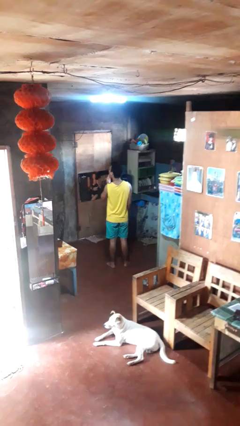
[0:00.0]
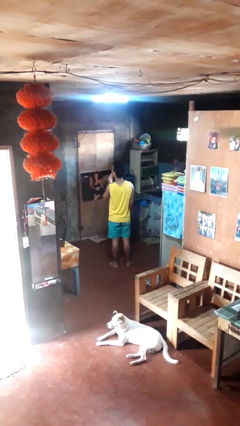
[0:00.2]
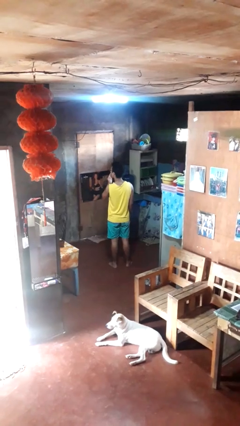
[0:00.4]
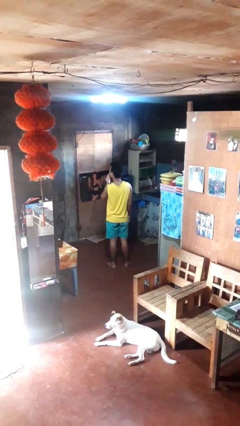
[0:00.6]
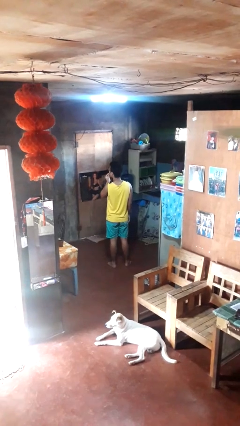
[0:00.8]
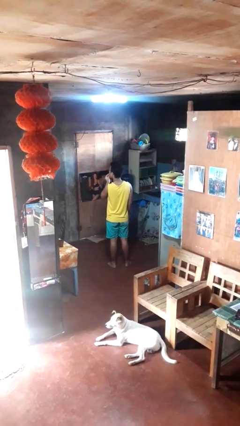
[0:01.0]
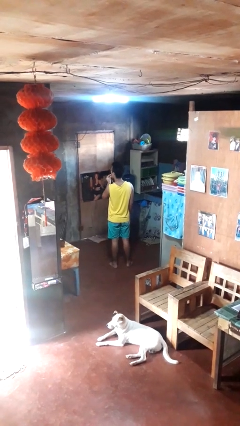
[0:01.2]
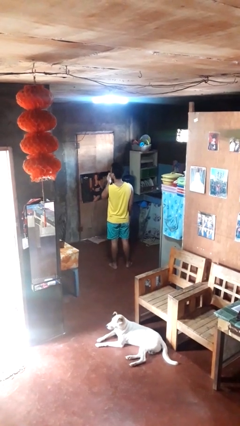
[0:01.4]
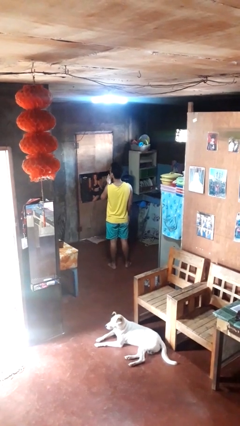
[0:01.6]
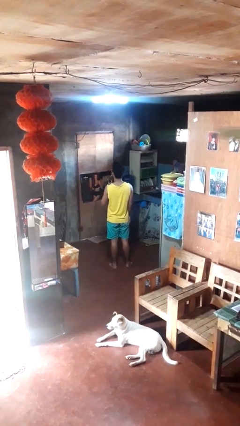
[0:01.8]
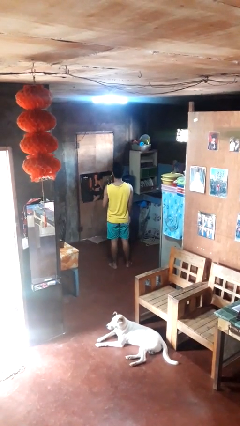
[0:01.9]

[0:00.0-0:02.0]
person licks fingers

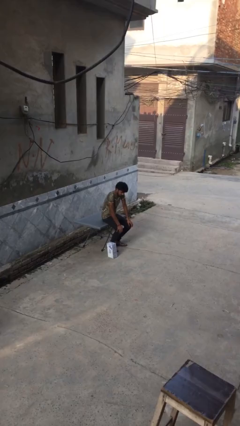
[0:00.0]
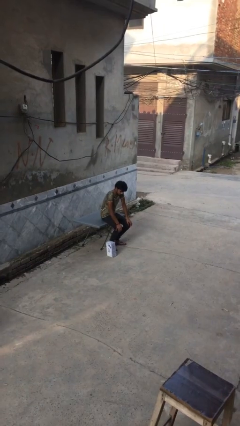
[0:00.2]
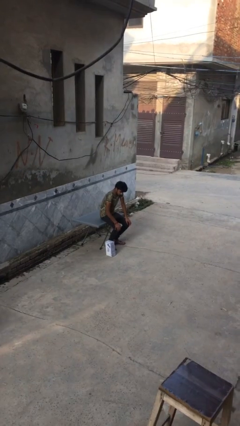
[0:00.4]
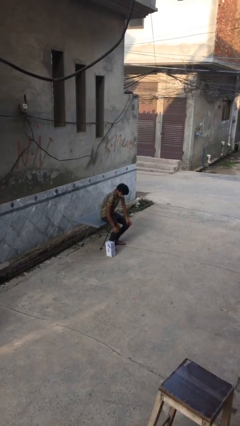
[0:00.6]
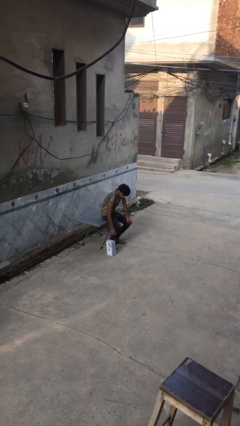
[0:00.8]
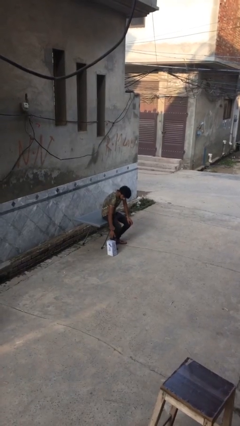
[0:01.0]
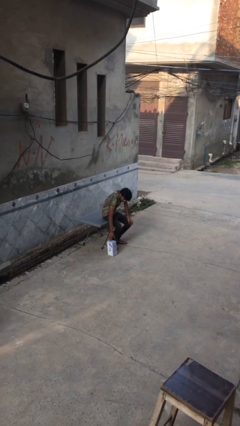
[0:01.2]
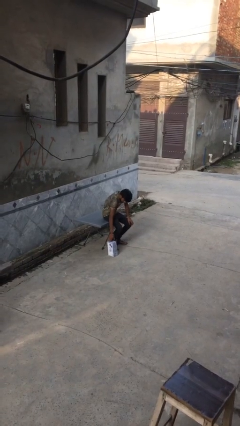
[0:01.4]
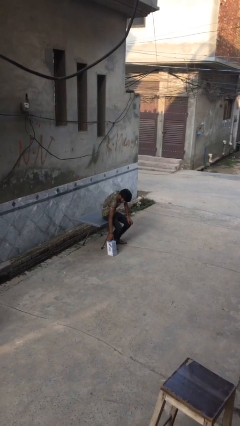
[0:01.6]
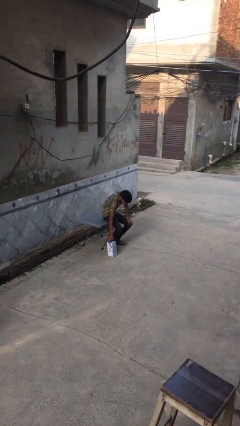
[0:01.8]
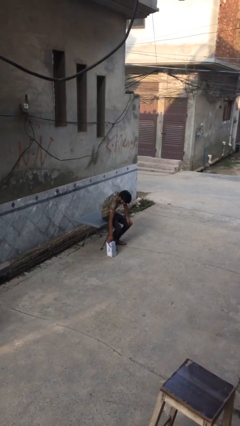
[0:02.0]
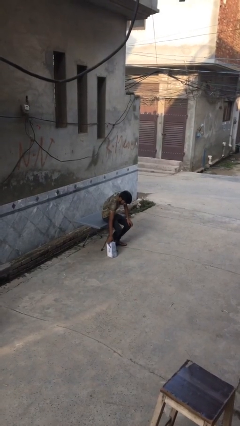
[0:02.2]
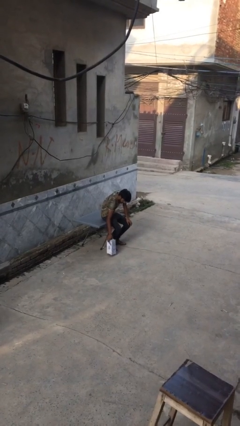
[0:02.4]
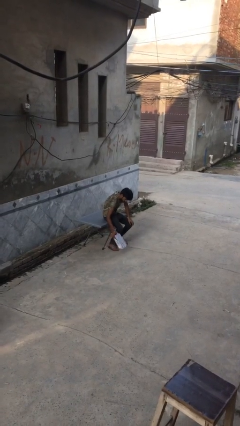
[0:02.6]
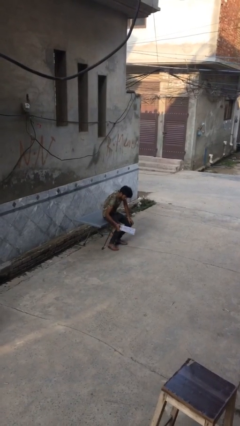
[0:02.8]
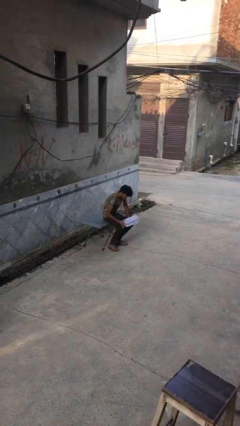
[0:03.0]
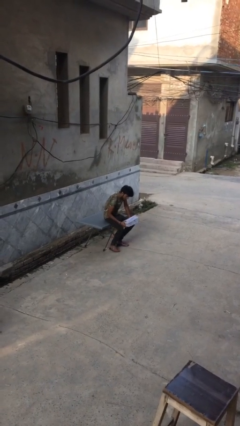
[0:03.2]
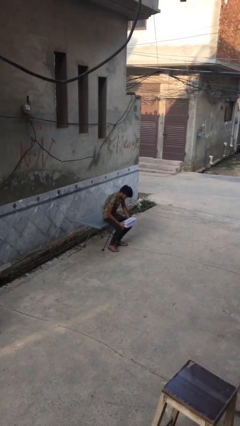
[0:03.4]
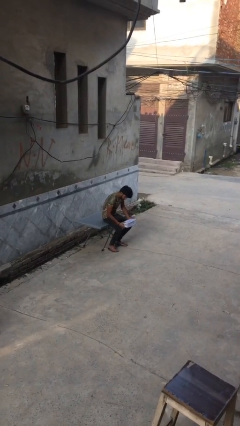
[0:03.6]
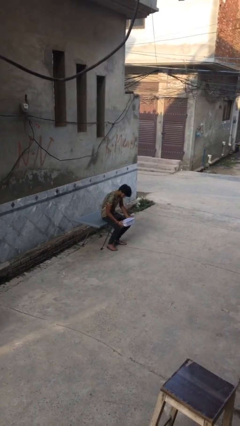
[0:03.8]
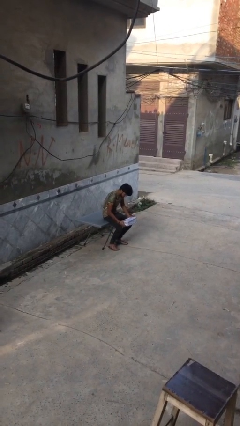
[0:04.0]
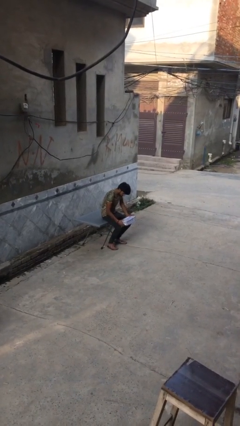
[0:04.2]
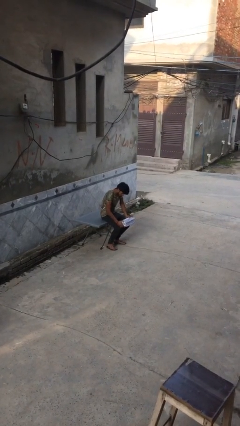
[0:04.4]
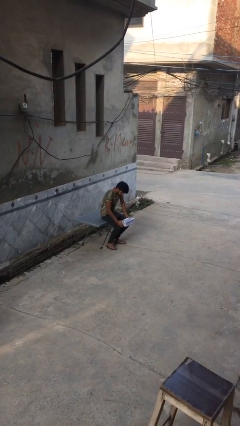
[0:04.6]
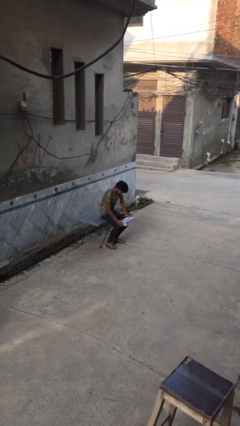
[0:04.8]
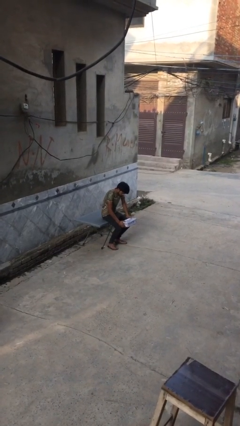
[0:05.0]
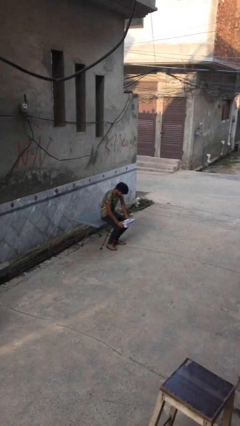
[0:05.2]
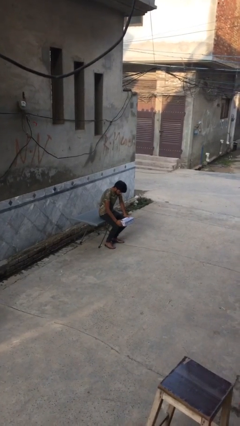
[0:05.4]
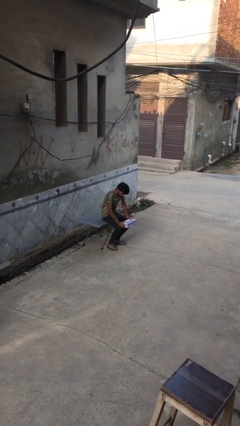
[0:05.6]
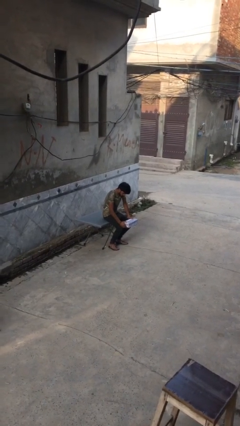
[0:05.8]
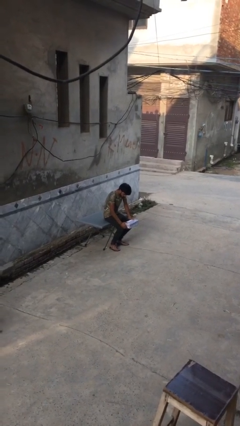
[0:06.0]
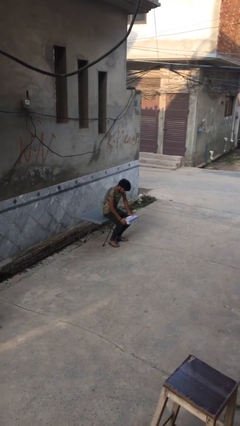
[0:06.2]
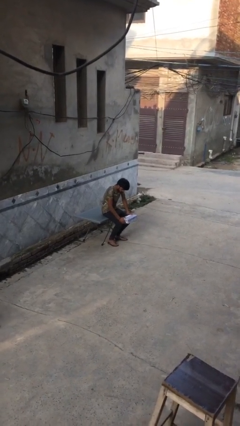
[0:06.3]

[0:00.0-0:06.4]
person picks up object from floor

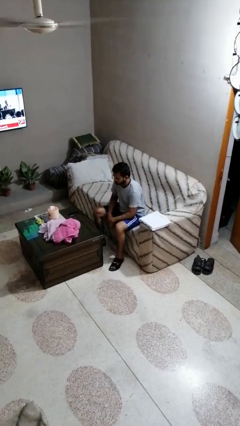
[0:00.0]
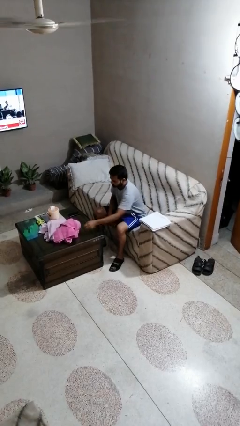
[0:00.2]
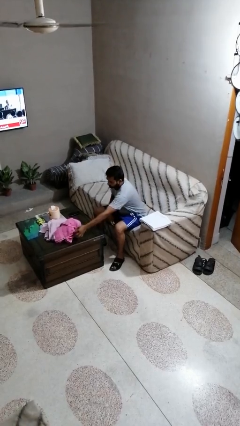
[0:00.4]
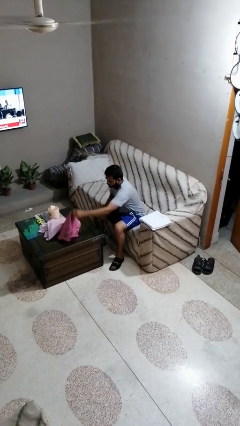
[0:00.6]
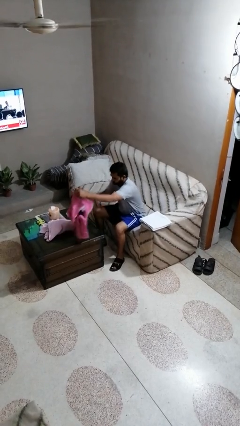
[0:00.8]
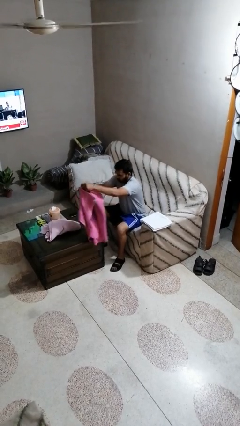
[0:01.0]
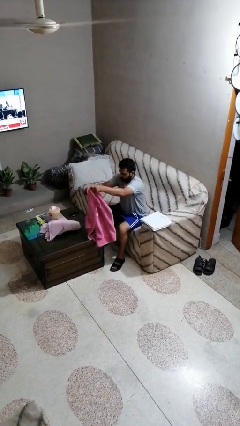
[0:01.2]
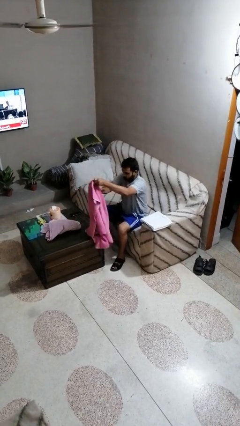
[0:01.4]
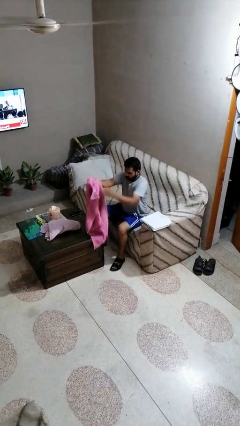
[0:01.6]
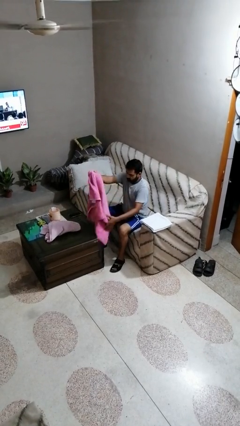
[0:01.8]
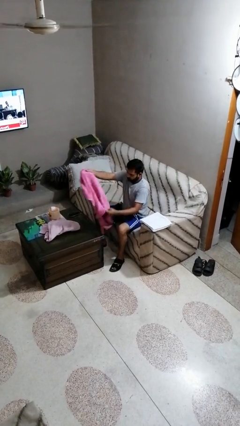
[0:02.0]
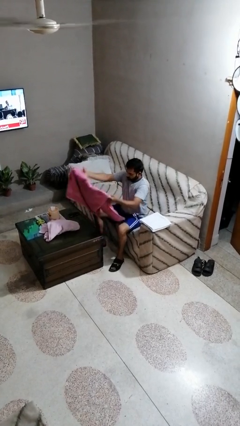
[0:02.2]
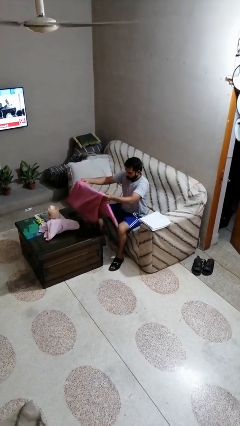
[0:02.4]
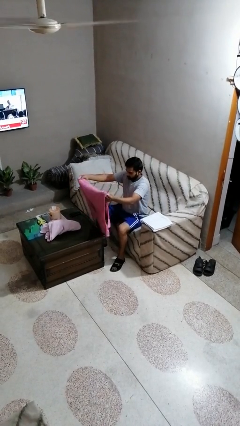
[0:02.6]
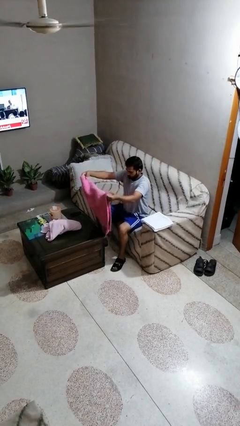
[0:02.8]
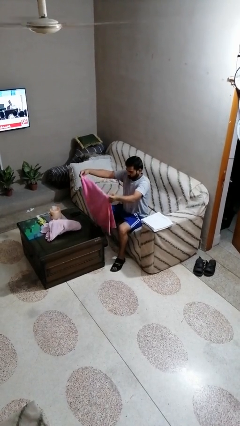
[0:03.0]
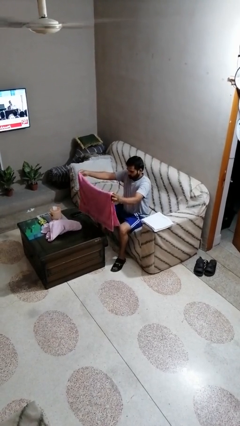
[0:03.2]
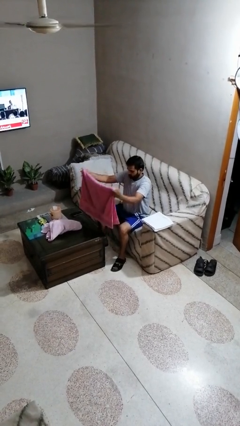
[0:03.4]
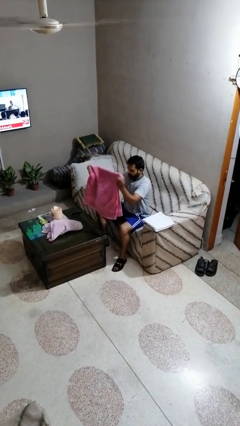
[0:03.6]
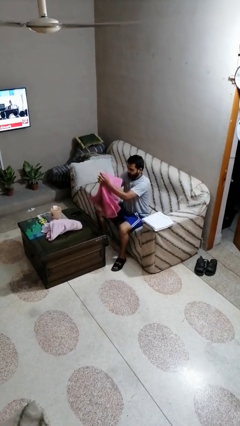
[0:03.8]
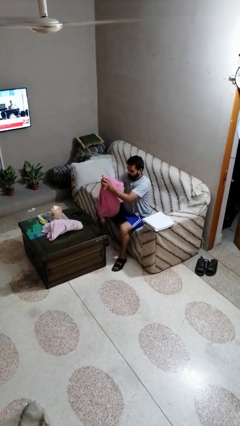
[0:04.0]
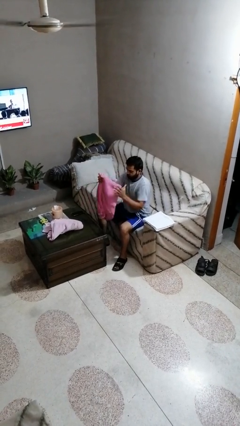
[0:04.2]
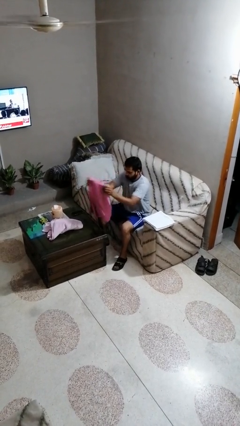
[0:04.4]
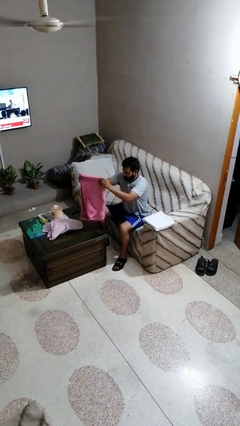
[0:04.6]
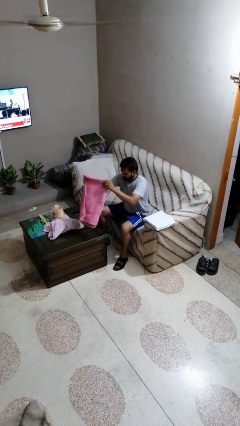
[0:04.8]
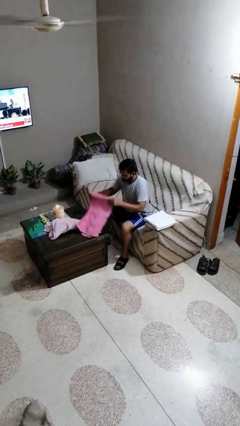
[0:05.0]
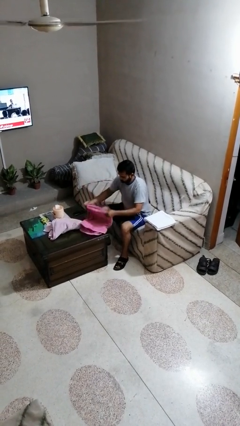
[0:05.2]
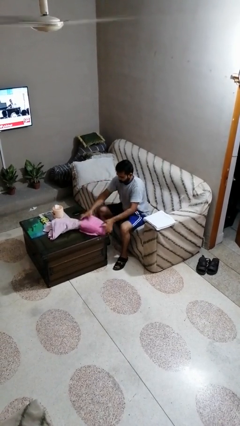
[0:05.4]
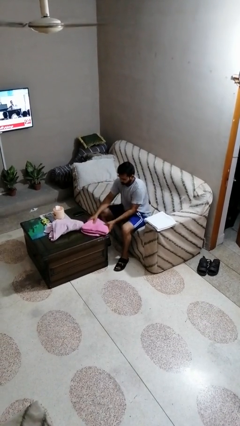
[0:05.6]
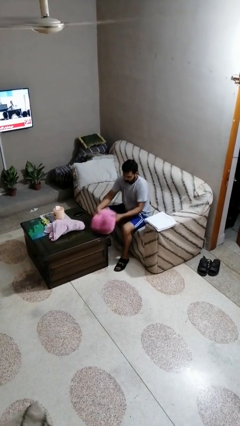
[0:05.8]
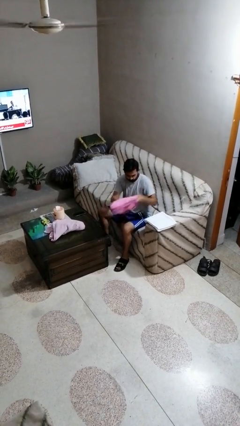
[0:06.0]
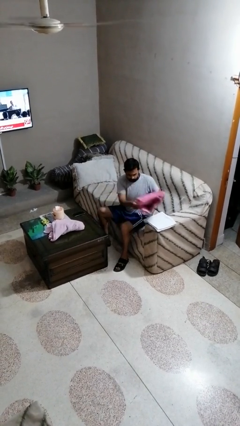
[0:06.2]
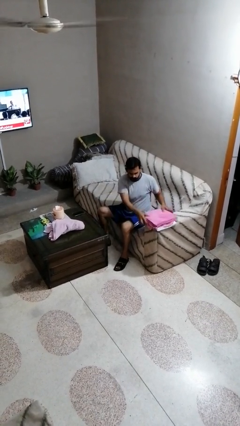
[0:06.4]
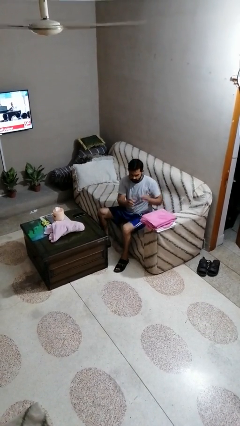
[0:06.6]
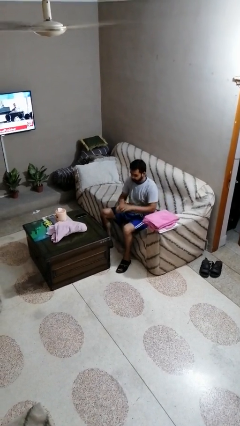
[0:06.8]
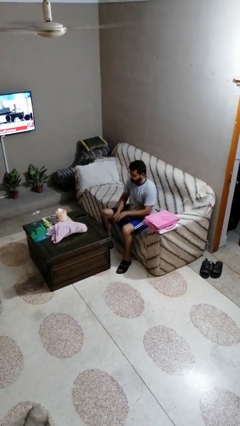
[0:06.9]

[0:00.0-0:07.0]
person folds towel

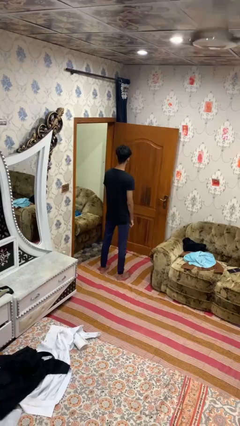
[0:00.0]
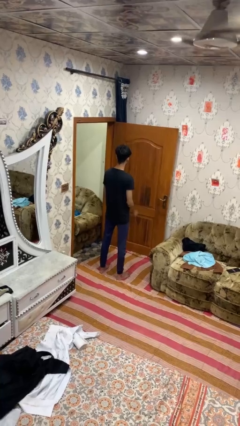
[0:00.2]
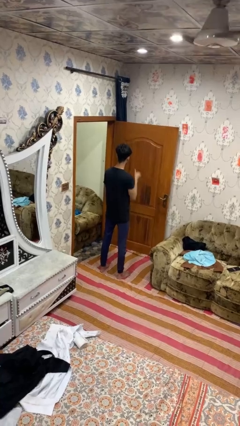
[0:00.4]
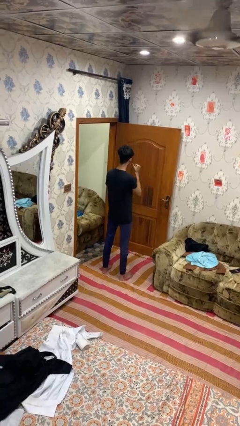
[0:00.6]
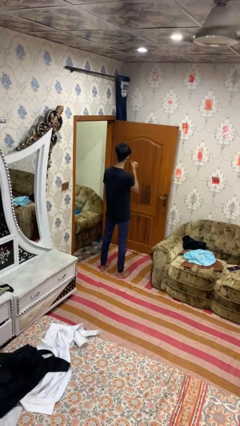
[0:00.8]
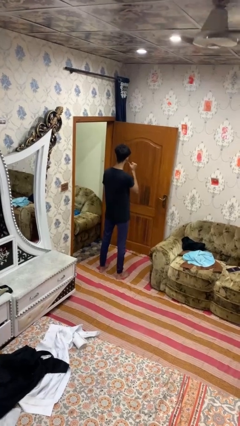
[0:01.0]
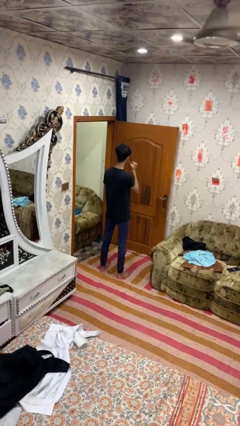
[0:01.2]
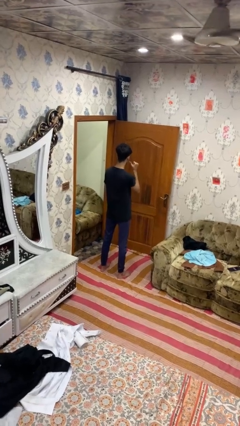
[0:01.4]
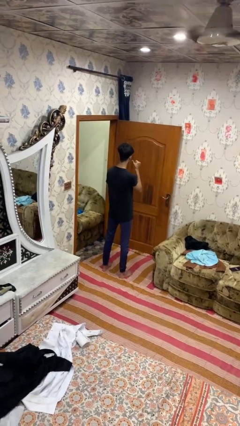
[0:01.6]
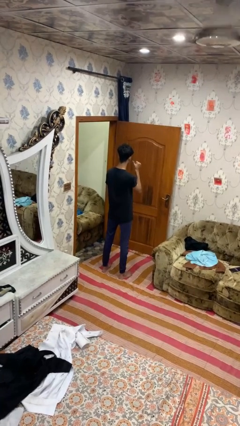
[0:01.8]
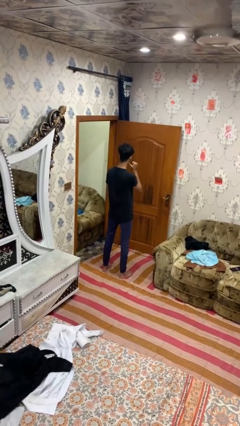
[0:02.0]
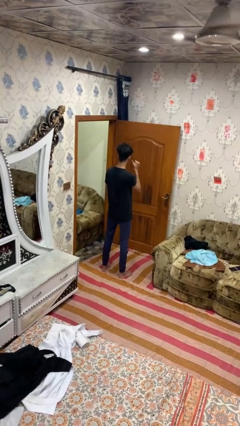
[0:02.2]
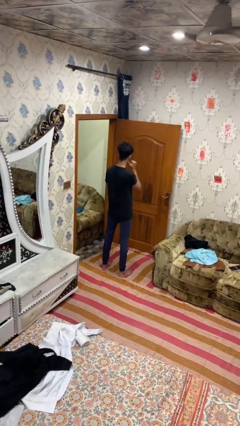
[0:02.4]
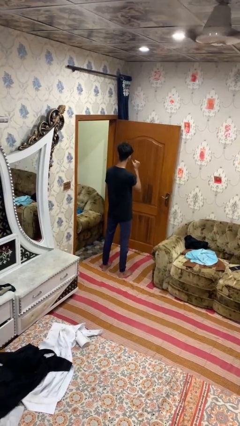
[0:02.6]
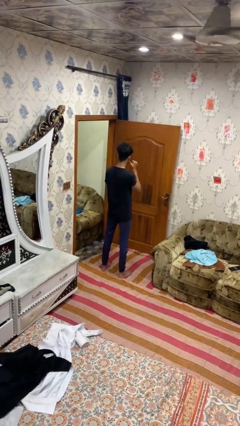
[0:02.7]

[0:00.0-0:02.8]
person gestures behind me
